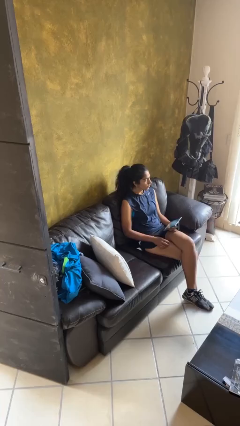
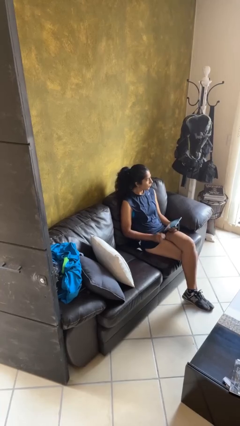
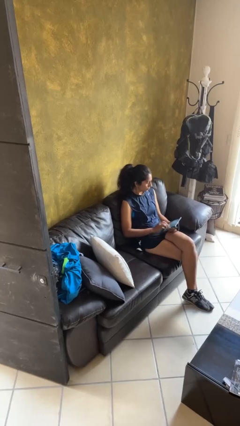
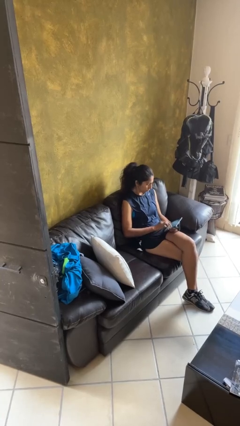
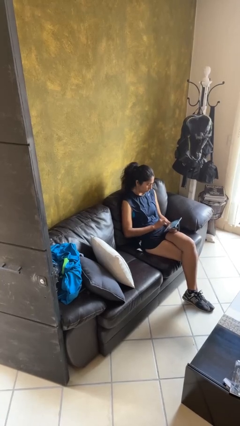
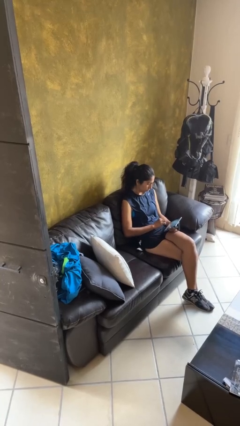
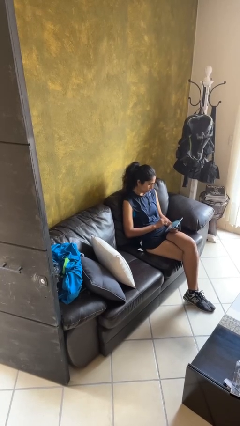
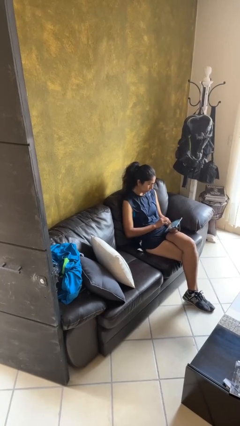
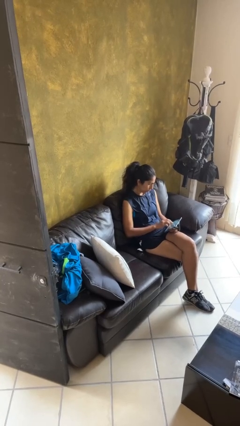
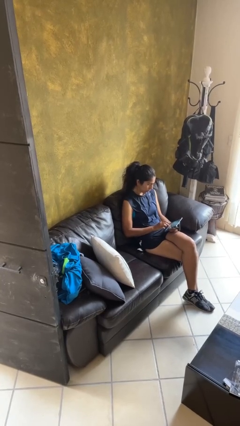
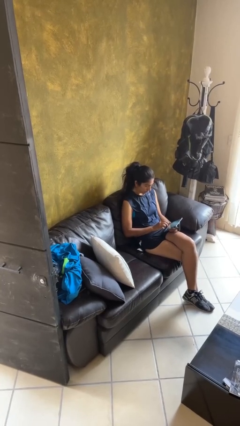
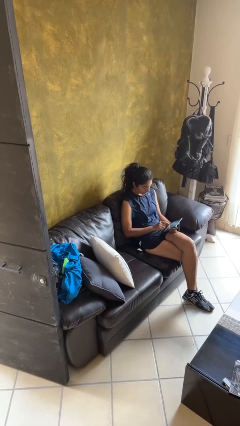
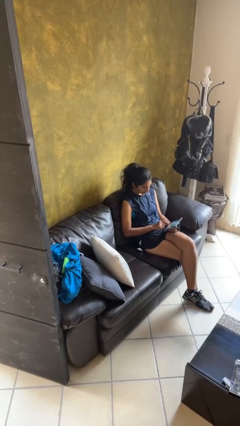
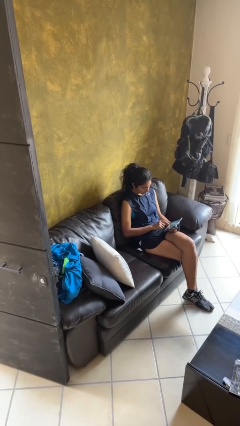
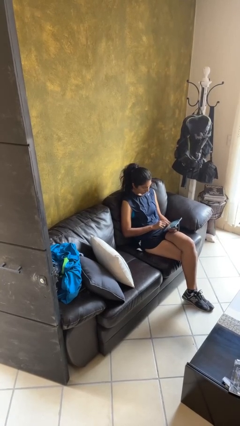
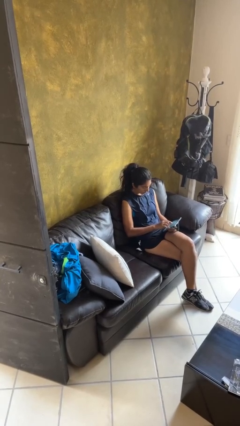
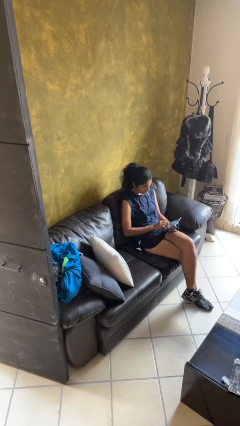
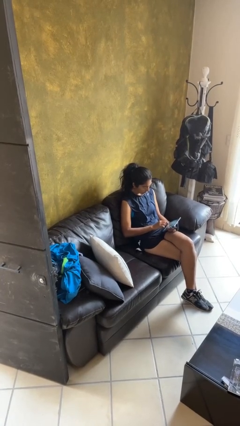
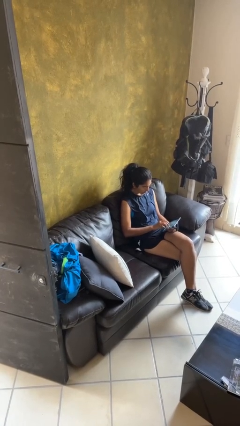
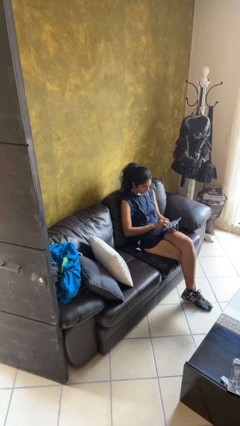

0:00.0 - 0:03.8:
person interacts with tablet

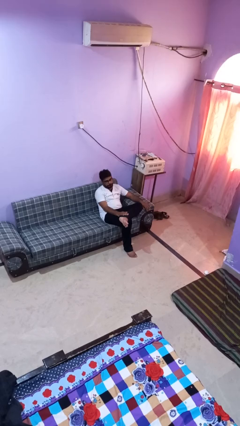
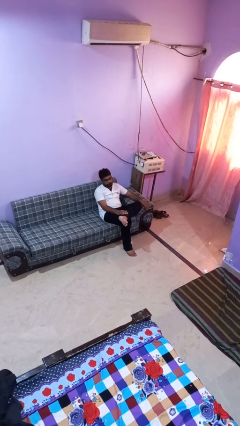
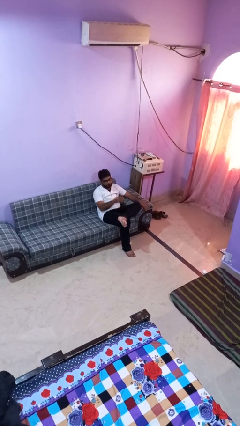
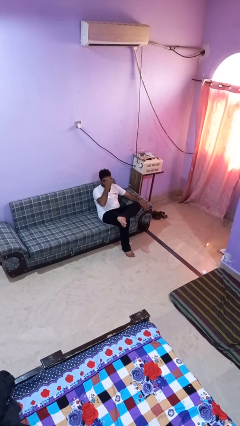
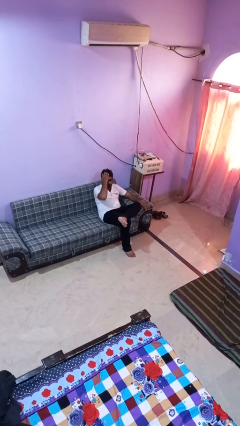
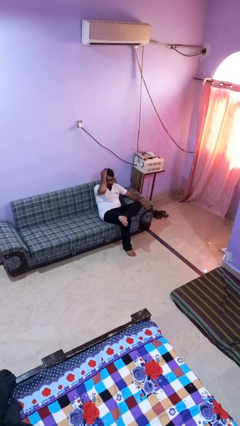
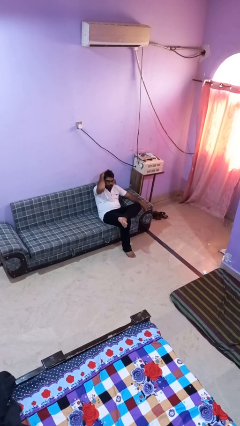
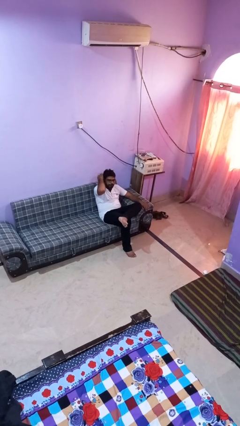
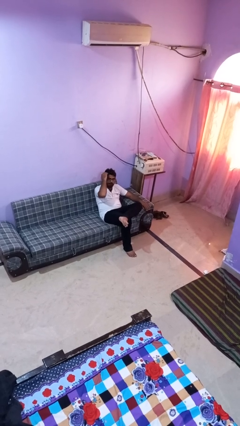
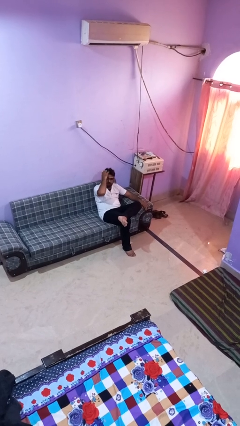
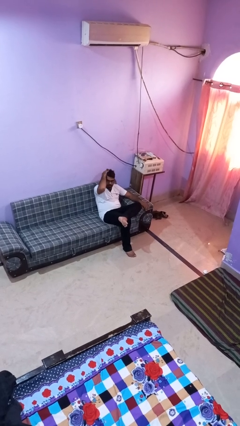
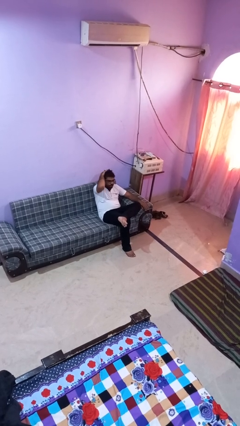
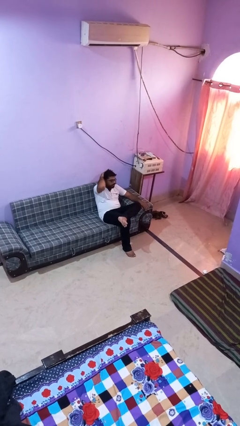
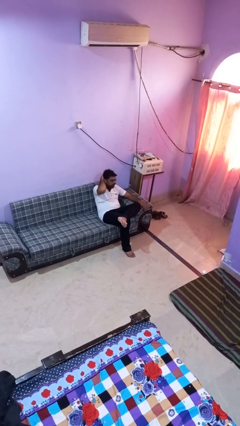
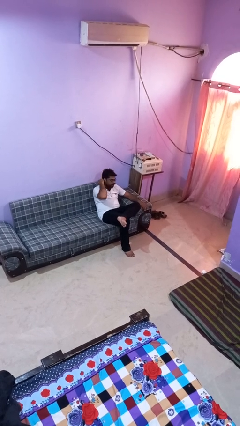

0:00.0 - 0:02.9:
person strokes hair

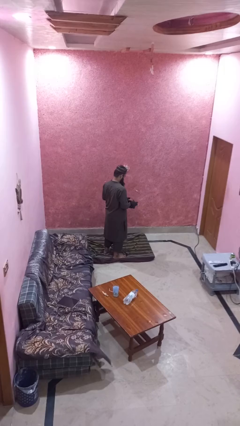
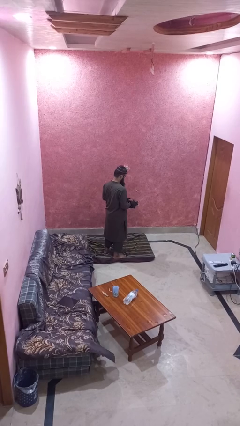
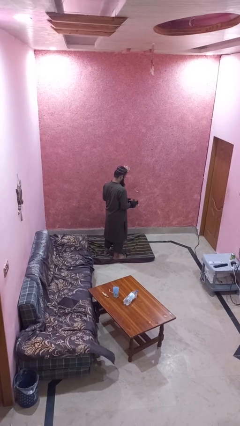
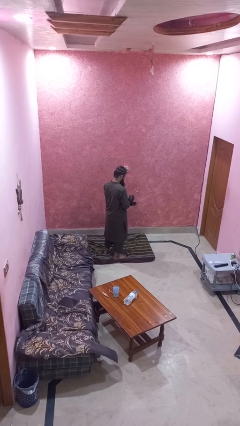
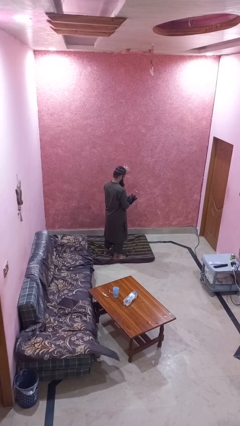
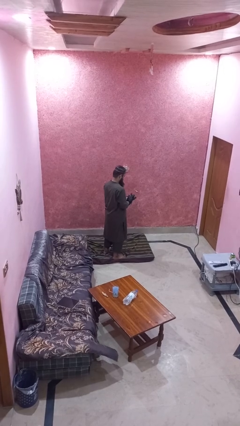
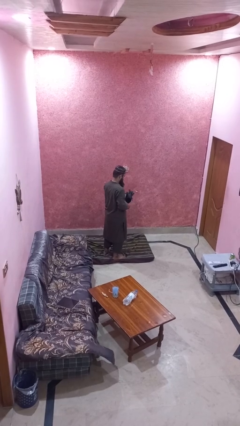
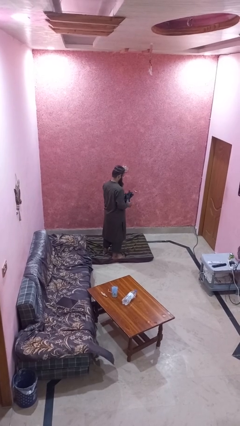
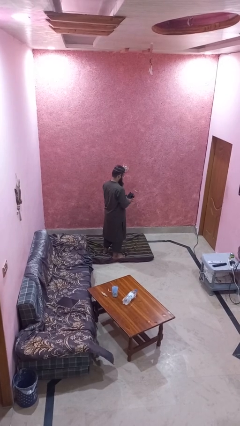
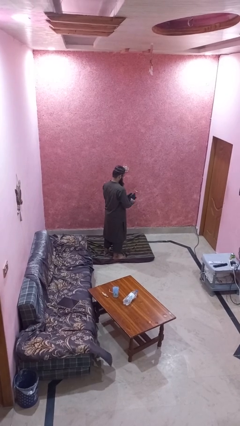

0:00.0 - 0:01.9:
person takes off gloves

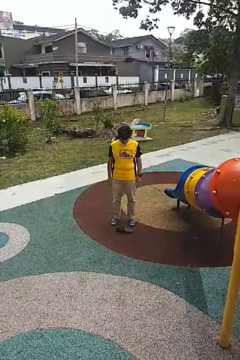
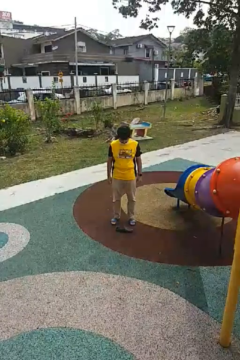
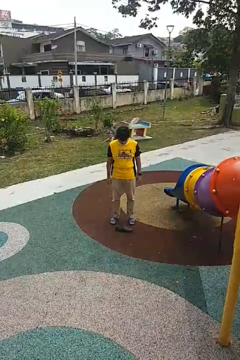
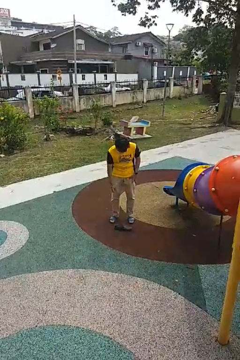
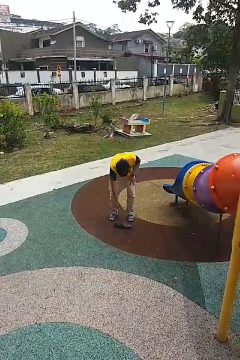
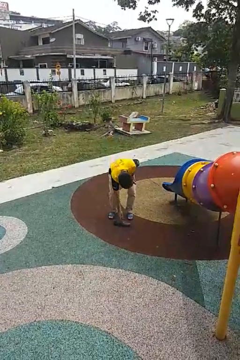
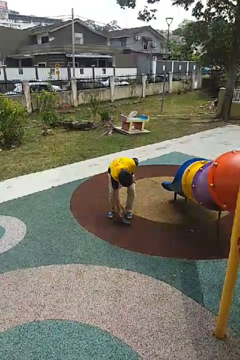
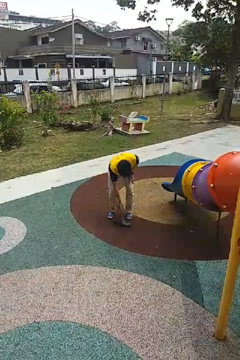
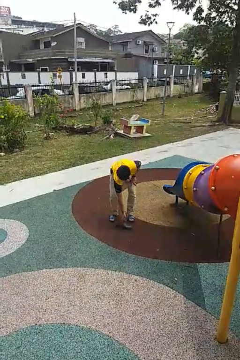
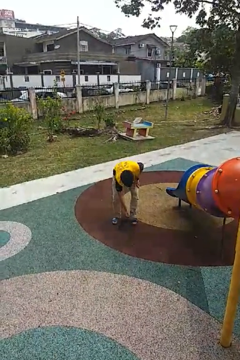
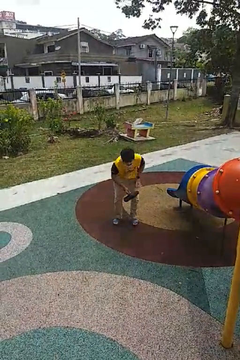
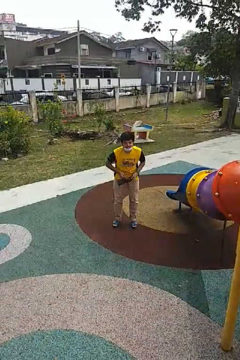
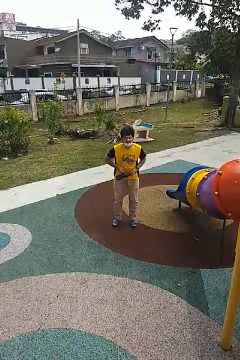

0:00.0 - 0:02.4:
person picks up object from floor

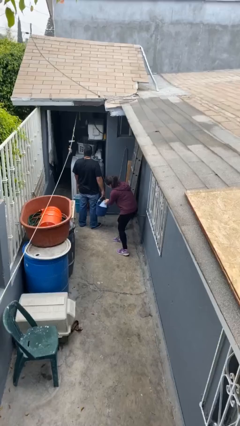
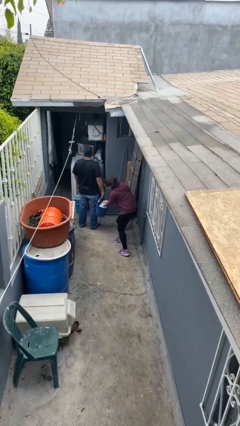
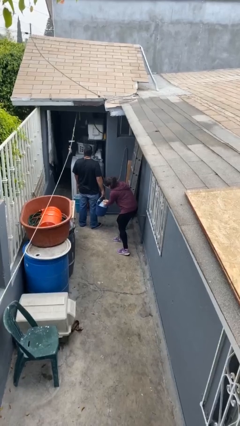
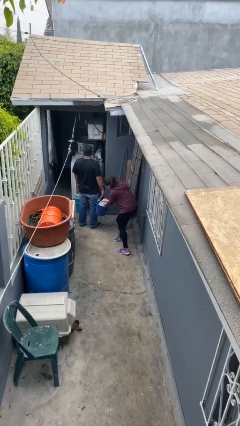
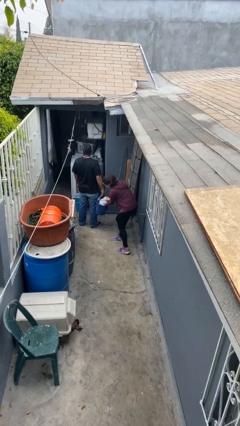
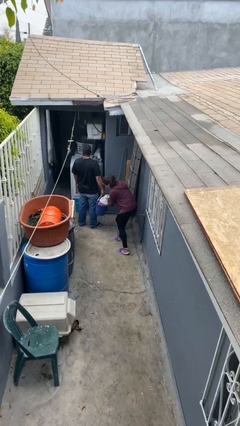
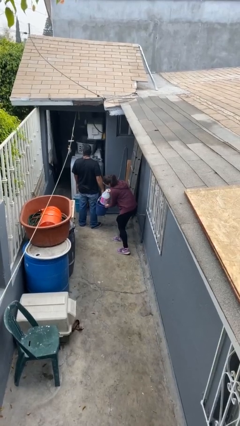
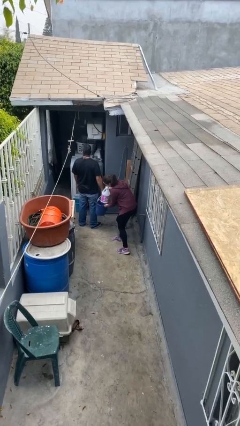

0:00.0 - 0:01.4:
person steals object from person

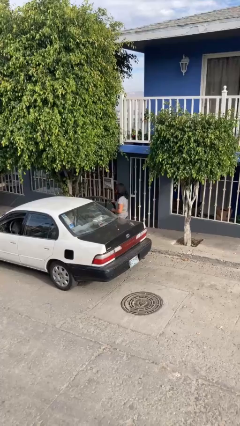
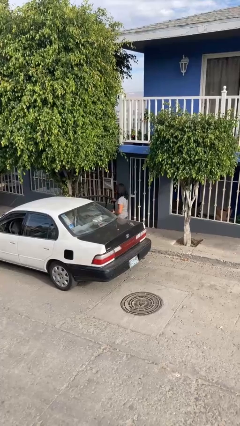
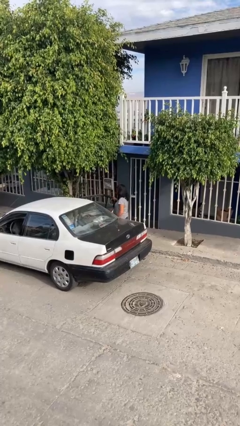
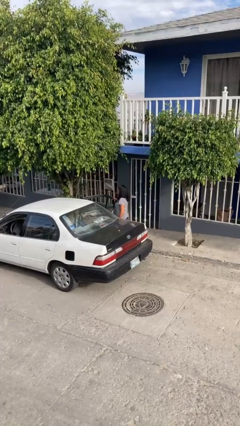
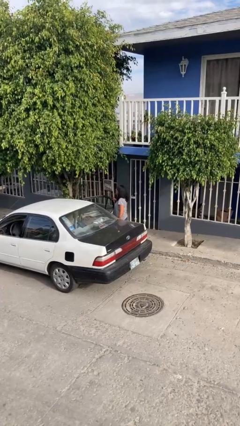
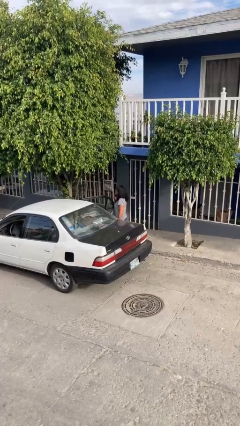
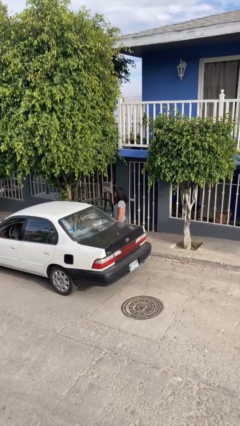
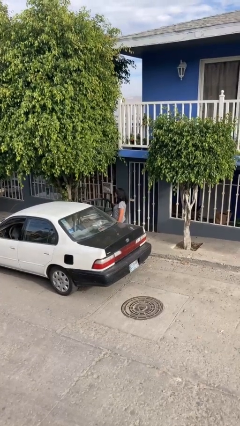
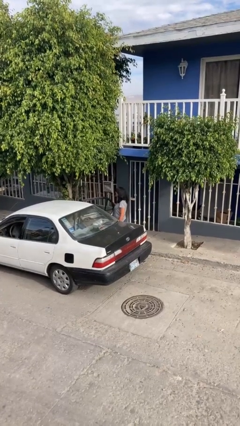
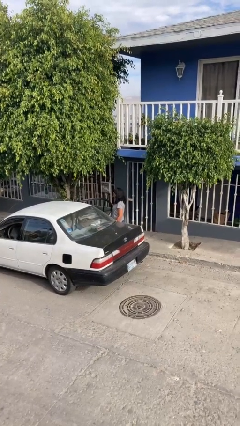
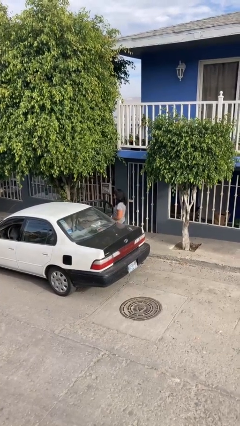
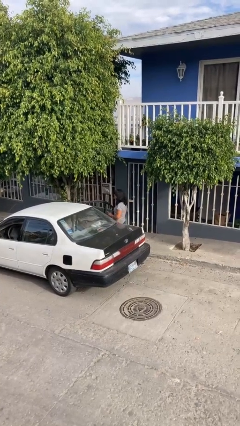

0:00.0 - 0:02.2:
person opens car door

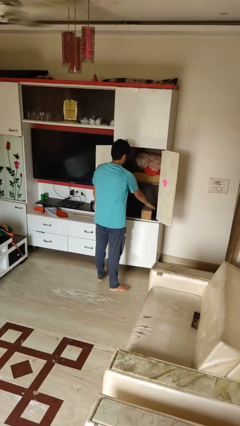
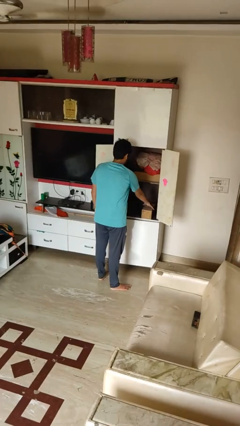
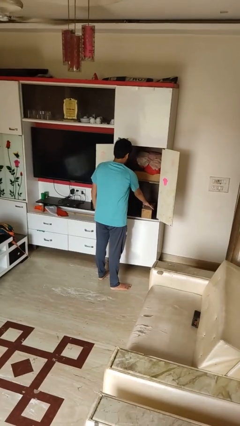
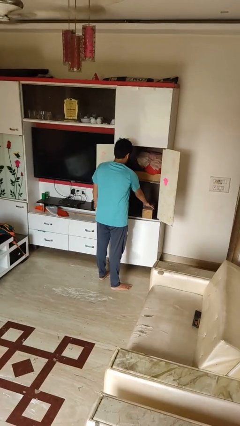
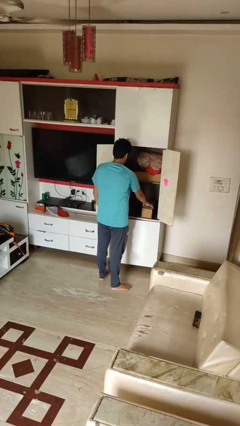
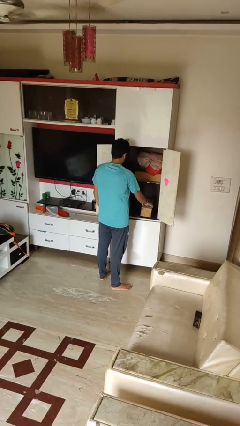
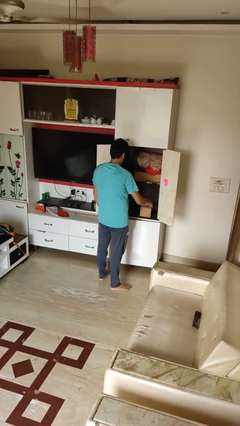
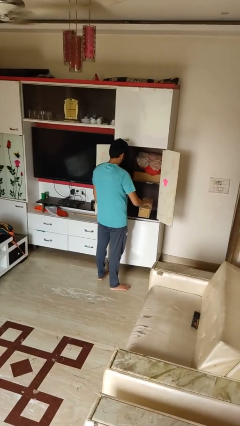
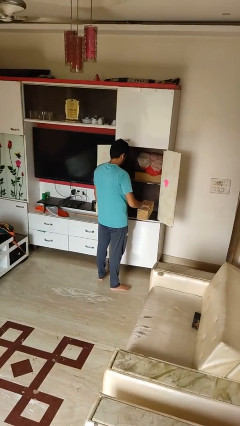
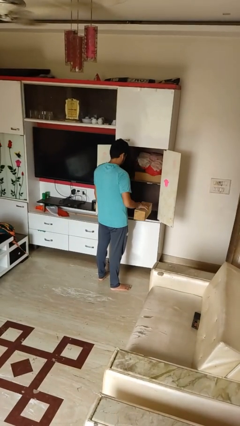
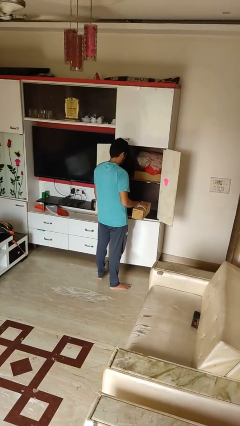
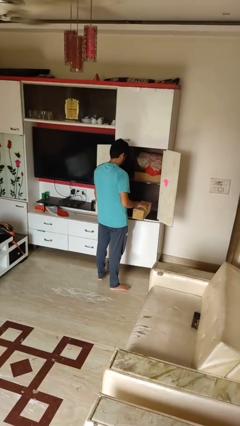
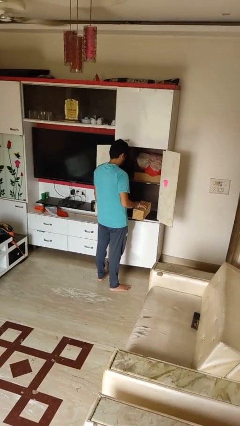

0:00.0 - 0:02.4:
person picks up object from cabinet

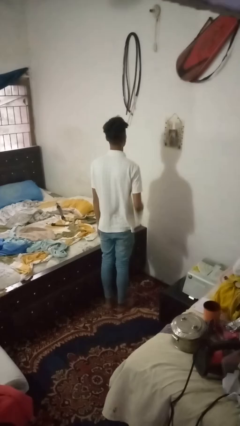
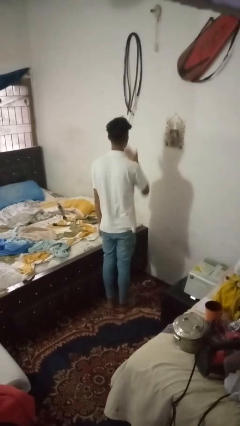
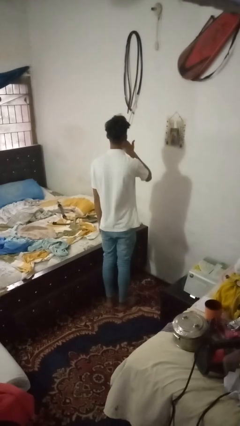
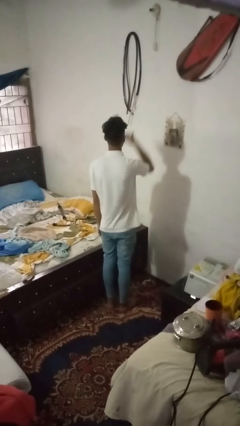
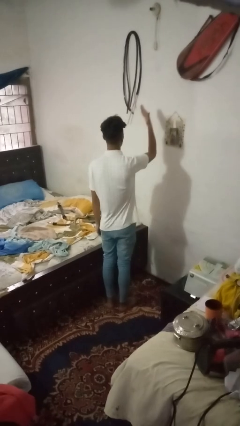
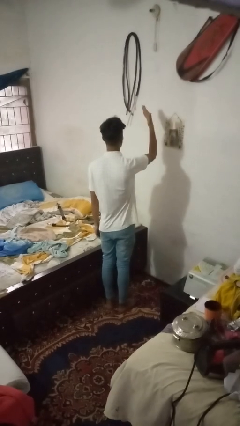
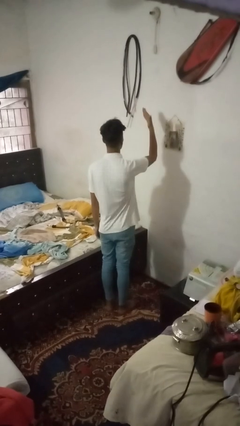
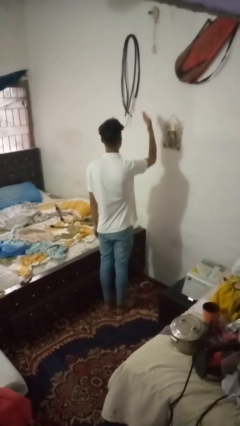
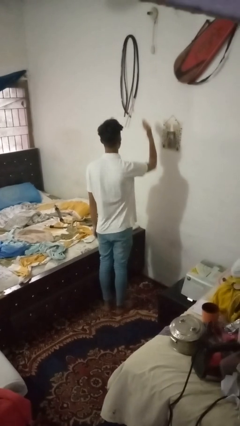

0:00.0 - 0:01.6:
person gestures blow kiss
